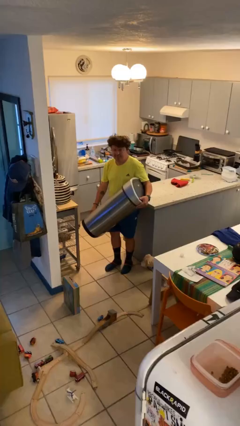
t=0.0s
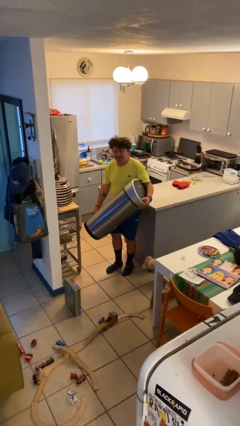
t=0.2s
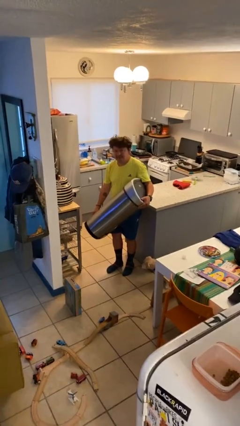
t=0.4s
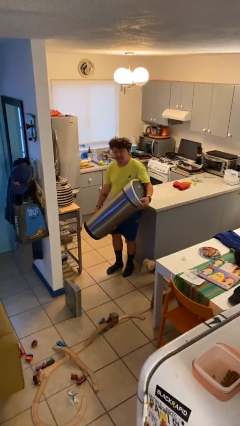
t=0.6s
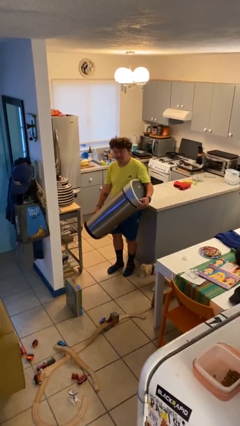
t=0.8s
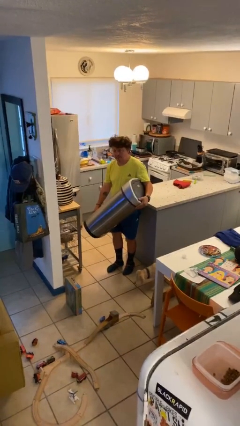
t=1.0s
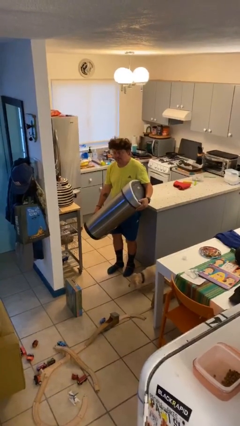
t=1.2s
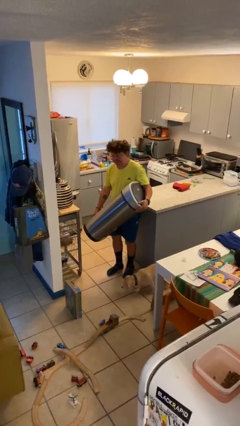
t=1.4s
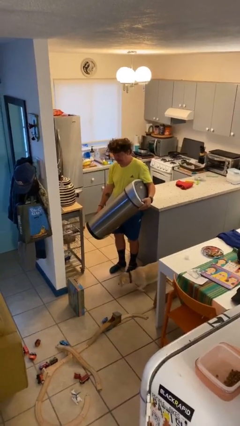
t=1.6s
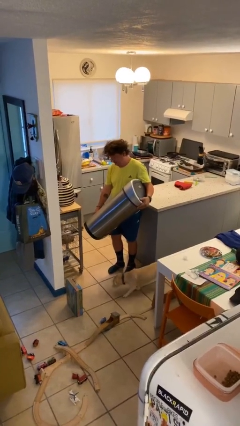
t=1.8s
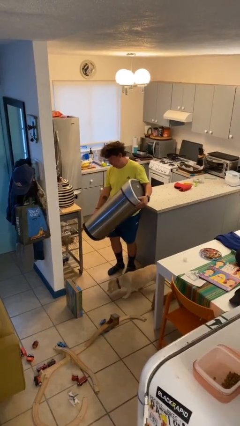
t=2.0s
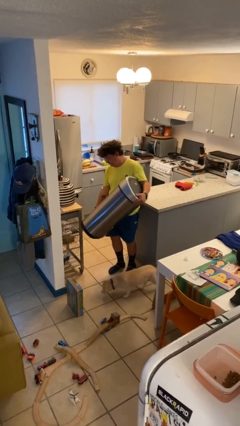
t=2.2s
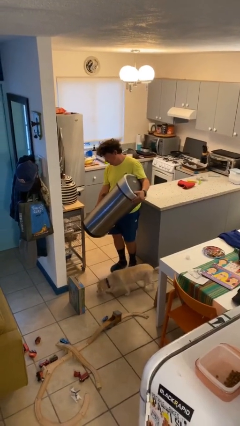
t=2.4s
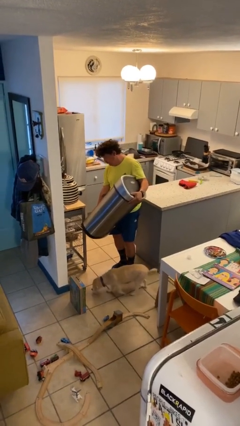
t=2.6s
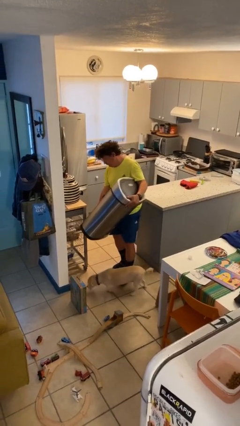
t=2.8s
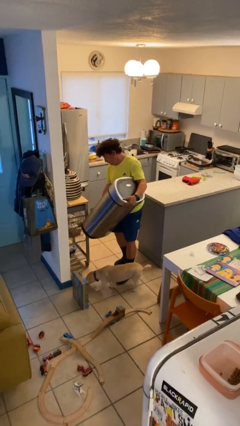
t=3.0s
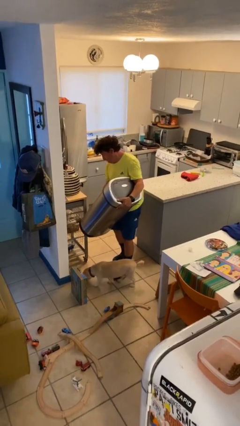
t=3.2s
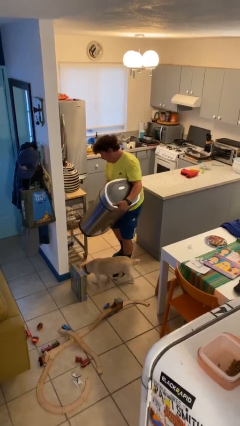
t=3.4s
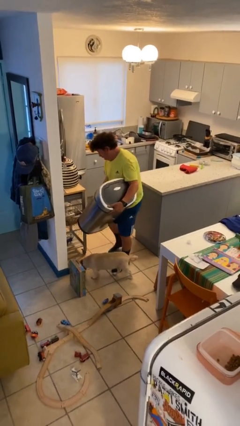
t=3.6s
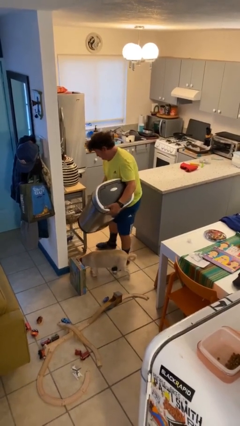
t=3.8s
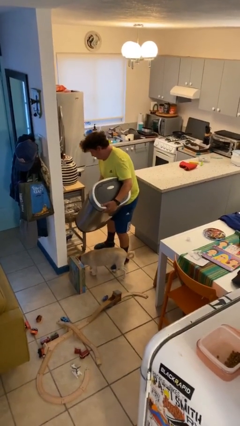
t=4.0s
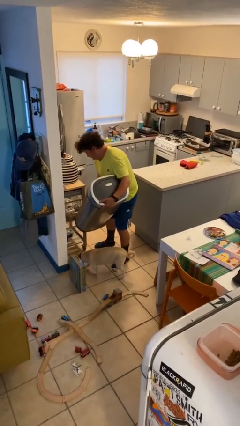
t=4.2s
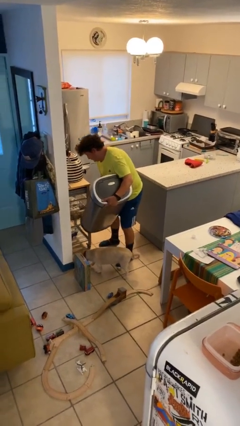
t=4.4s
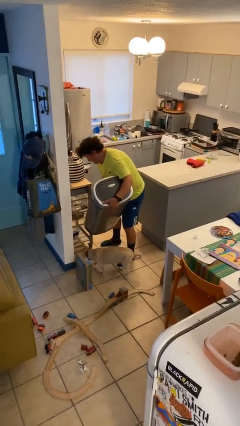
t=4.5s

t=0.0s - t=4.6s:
person carries heavy object

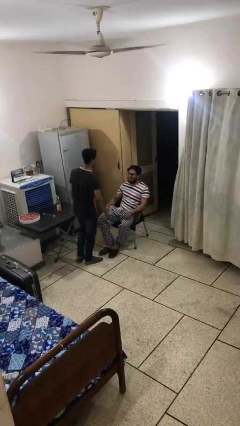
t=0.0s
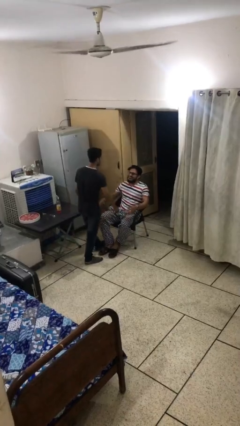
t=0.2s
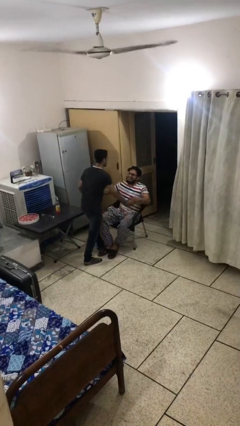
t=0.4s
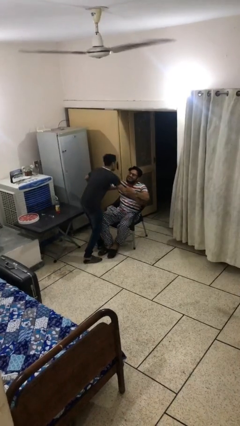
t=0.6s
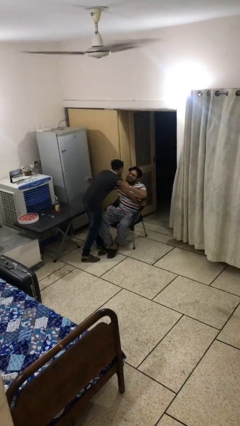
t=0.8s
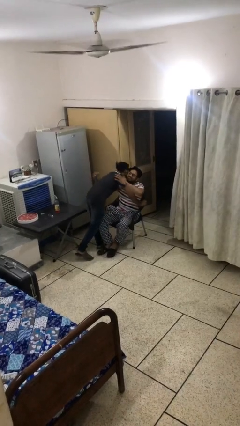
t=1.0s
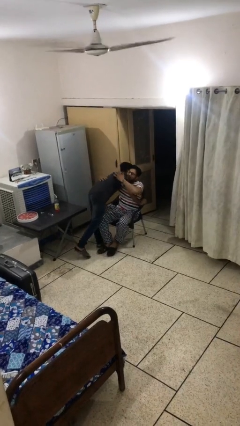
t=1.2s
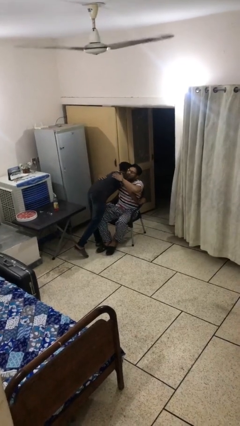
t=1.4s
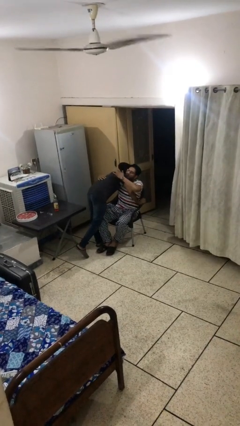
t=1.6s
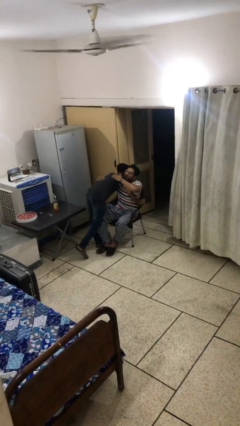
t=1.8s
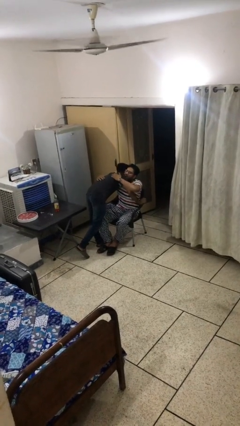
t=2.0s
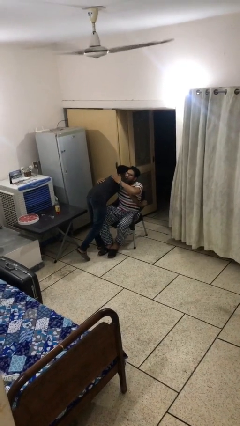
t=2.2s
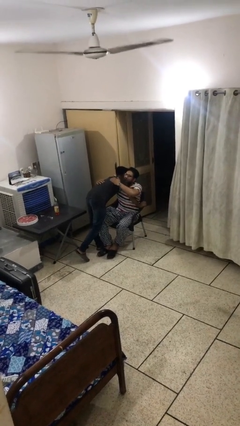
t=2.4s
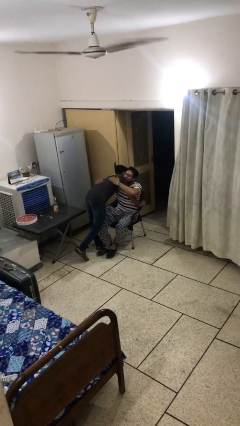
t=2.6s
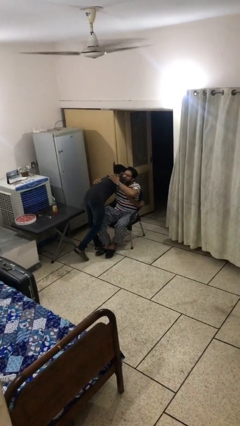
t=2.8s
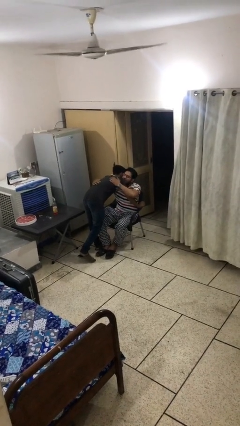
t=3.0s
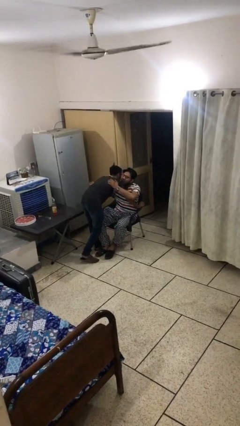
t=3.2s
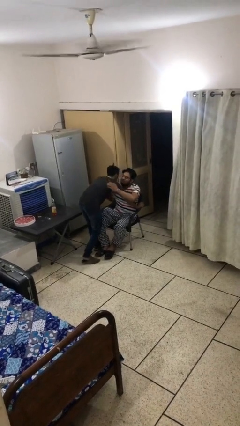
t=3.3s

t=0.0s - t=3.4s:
person embraces person

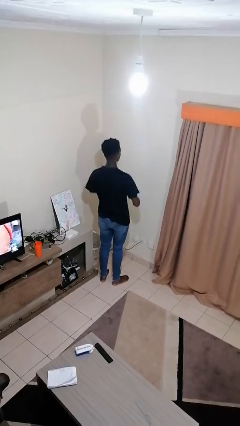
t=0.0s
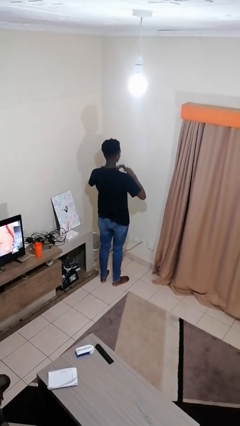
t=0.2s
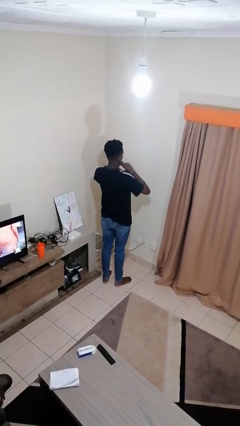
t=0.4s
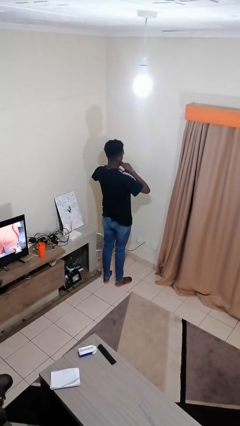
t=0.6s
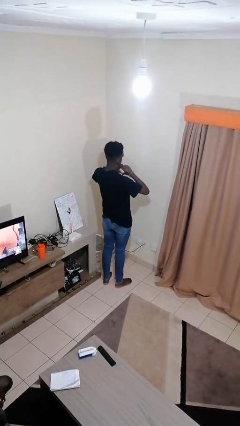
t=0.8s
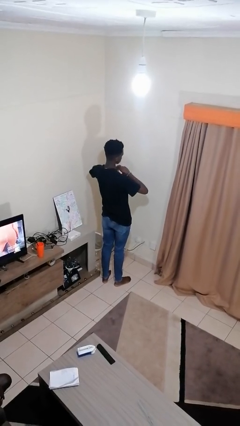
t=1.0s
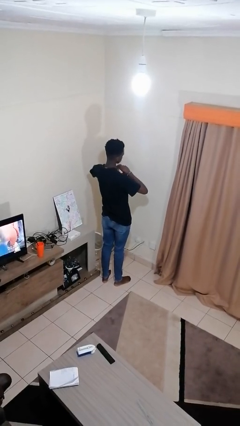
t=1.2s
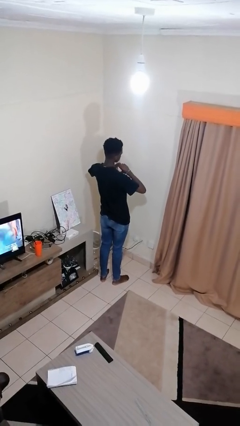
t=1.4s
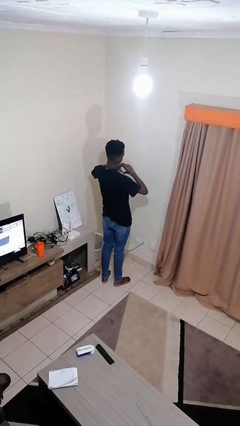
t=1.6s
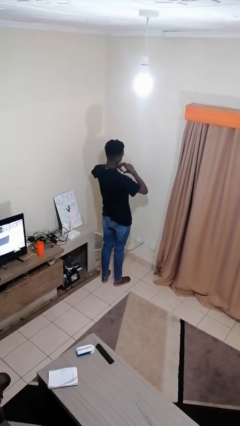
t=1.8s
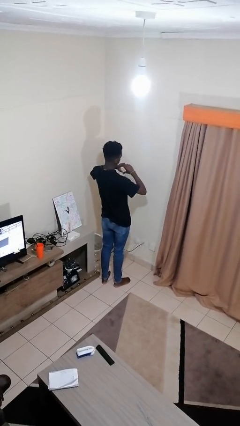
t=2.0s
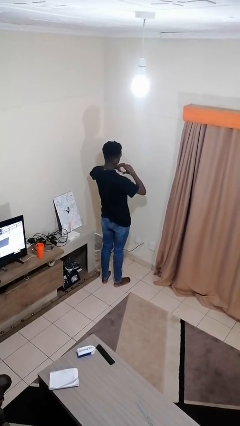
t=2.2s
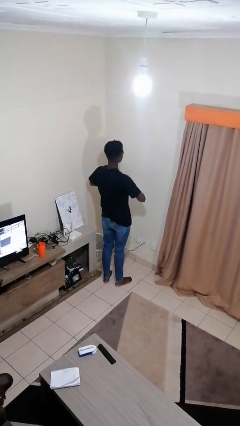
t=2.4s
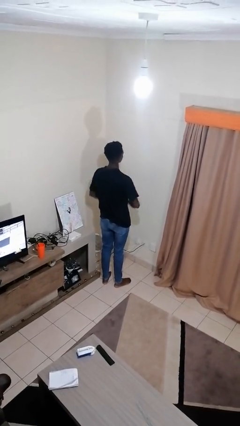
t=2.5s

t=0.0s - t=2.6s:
person gestures heart

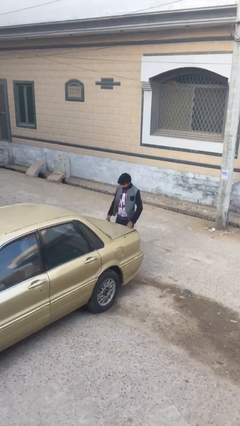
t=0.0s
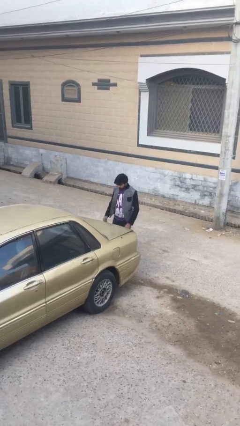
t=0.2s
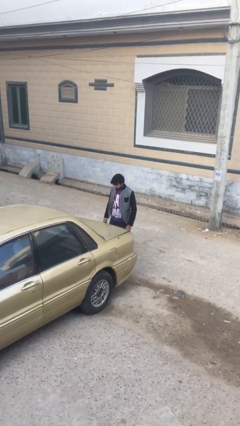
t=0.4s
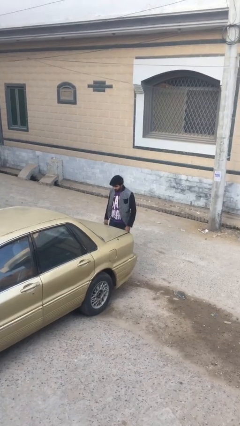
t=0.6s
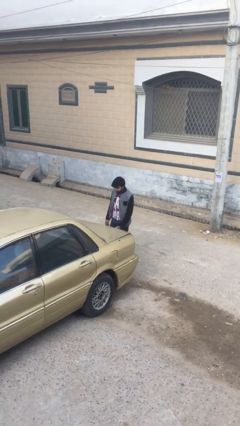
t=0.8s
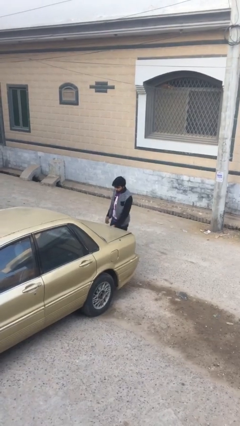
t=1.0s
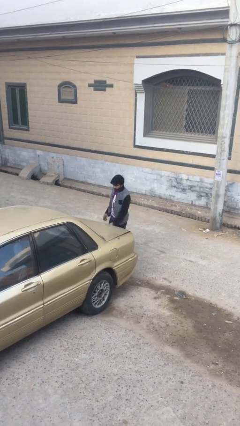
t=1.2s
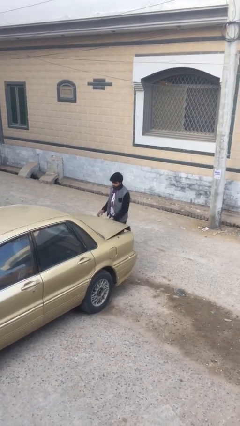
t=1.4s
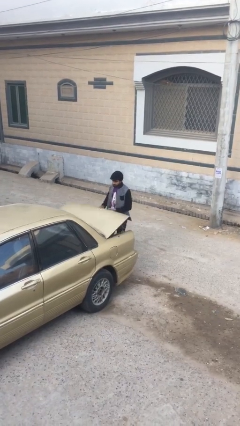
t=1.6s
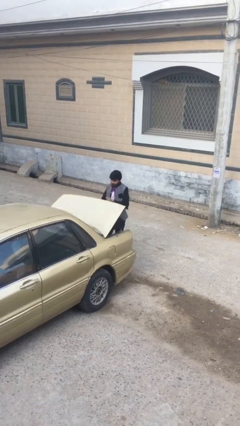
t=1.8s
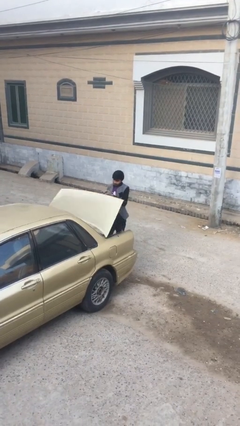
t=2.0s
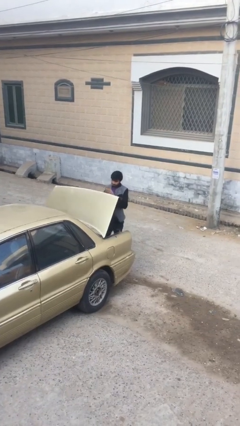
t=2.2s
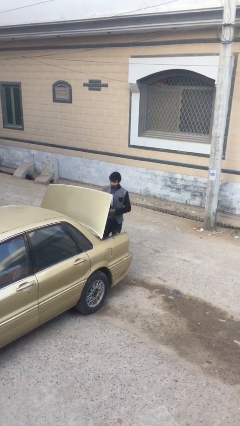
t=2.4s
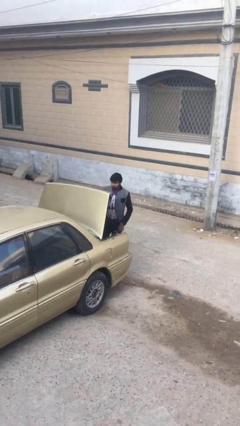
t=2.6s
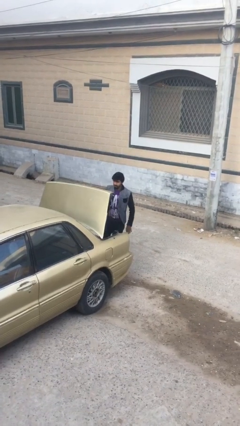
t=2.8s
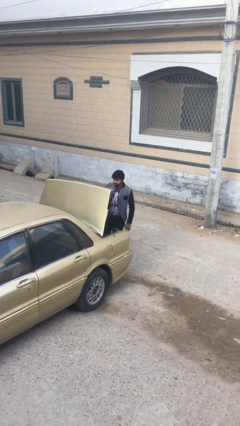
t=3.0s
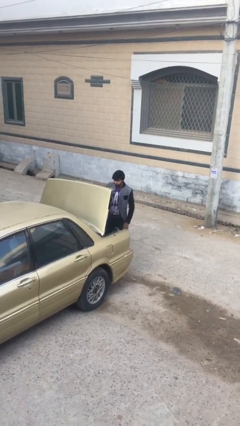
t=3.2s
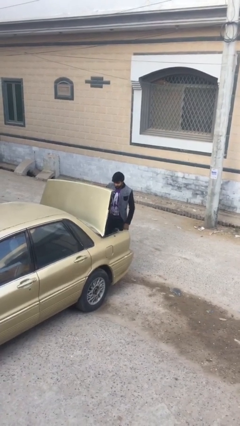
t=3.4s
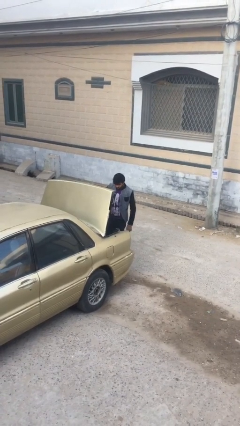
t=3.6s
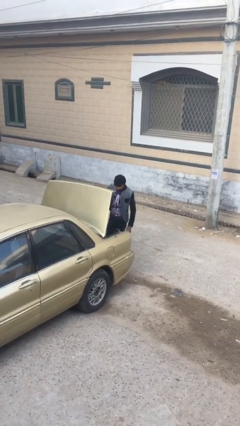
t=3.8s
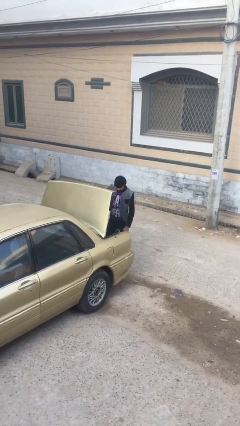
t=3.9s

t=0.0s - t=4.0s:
person opens car trunk

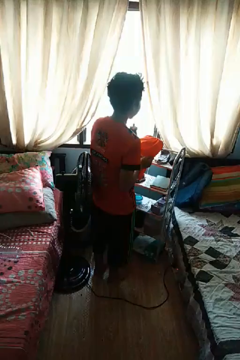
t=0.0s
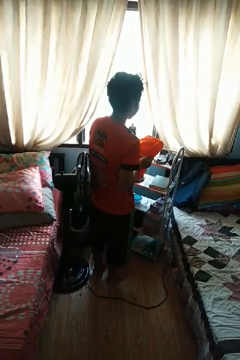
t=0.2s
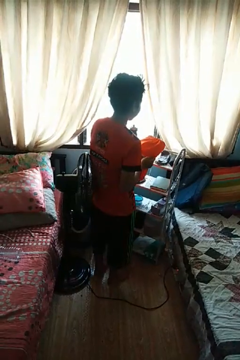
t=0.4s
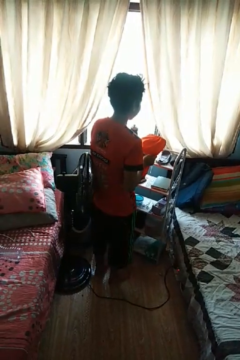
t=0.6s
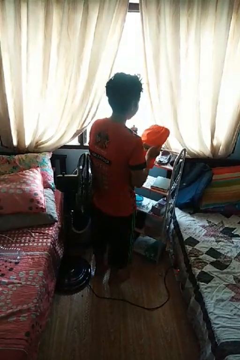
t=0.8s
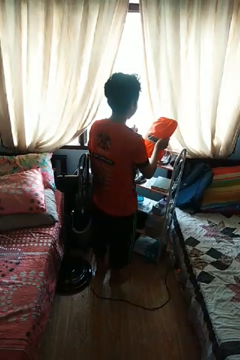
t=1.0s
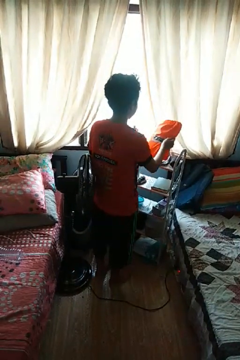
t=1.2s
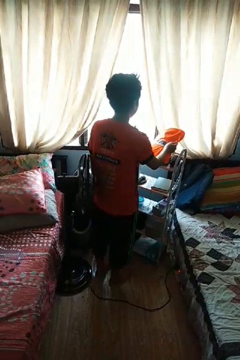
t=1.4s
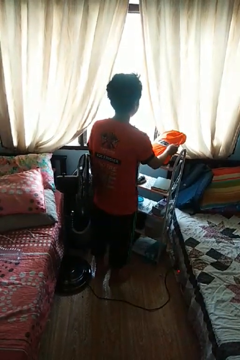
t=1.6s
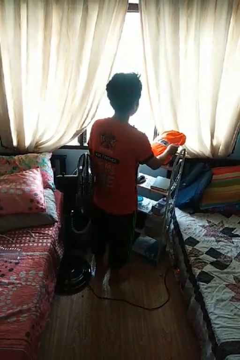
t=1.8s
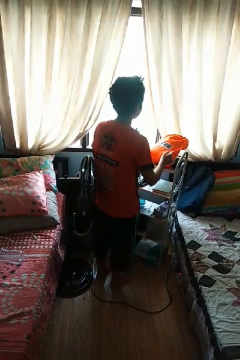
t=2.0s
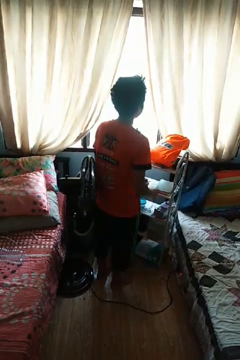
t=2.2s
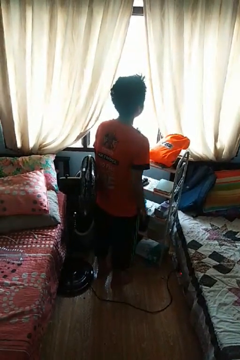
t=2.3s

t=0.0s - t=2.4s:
person puts down object on countertop

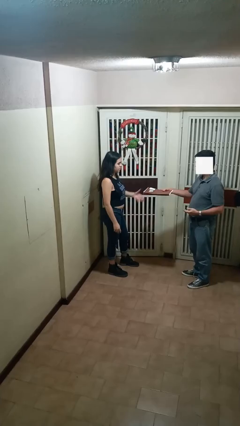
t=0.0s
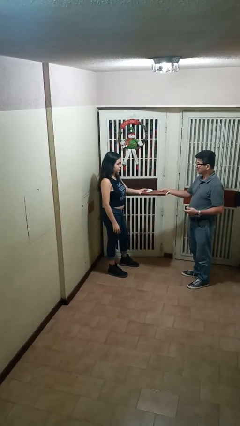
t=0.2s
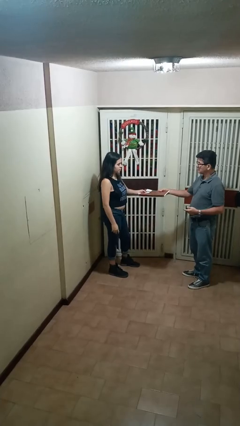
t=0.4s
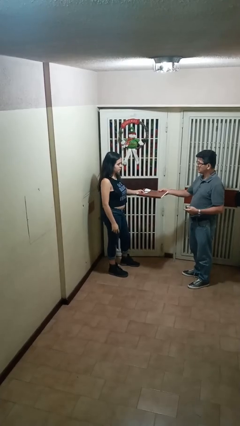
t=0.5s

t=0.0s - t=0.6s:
person transfers object to person
